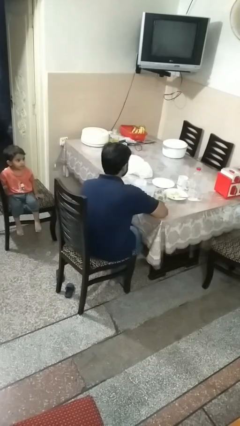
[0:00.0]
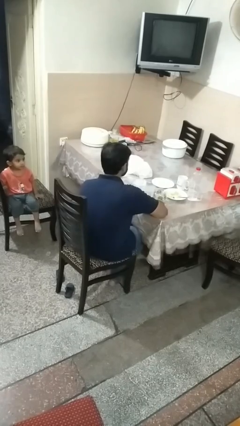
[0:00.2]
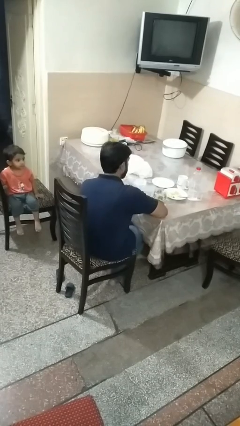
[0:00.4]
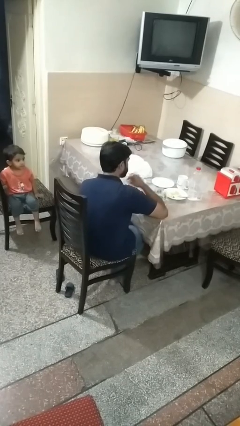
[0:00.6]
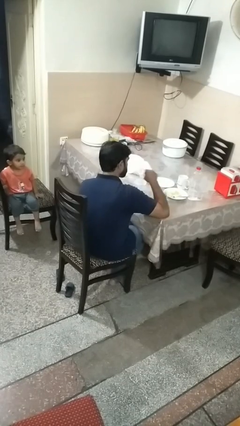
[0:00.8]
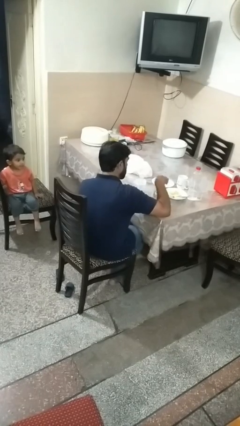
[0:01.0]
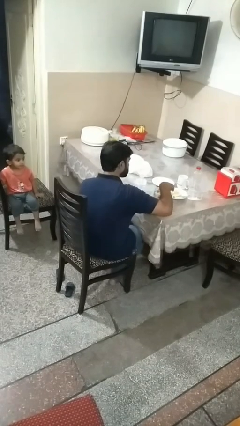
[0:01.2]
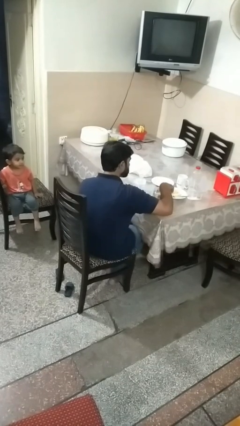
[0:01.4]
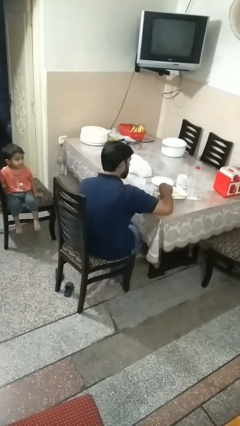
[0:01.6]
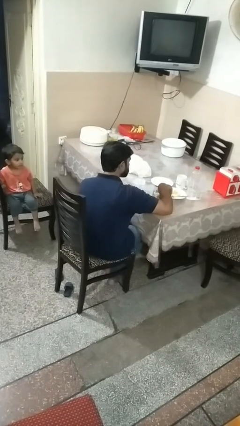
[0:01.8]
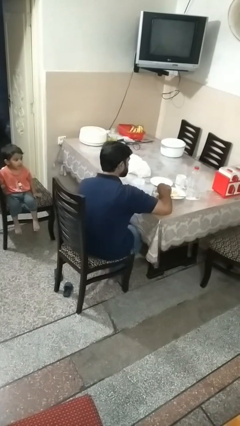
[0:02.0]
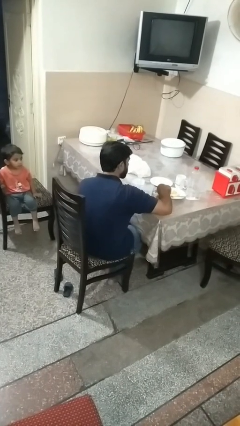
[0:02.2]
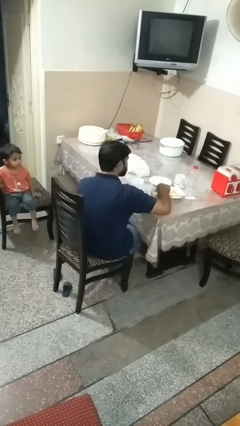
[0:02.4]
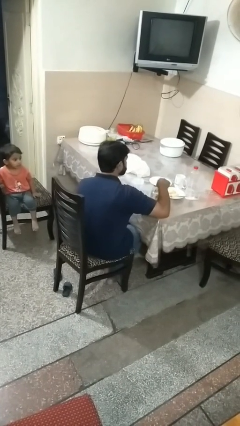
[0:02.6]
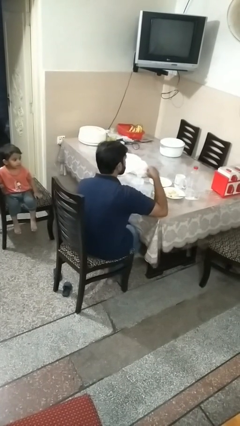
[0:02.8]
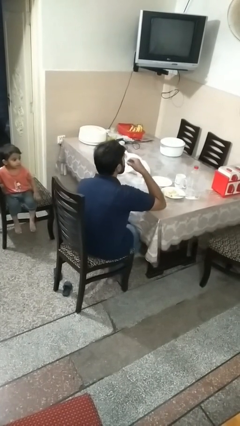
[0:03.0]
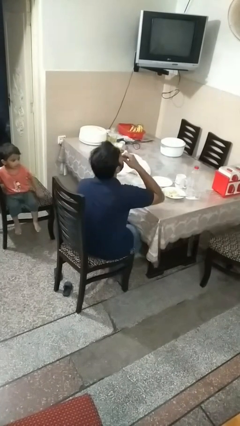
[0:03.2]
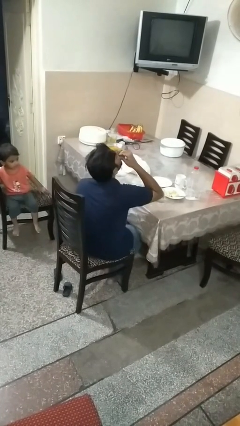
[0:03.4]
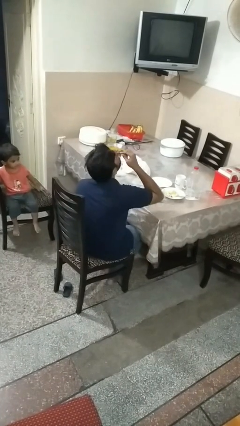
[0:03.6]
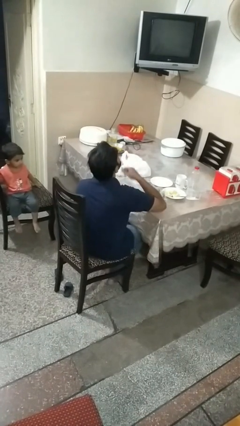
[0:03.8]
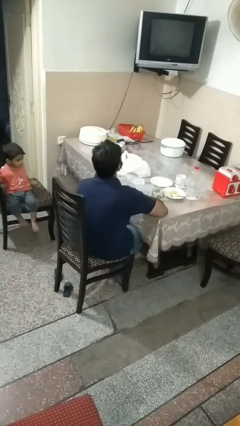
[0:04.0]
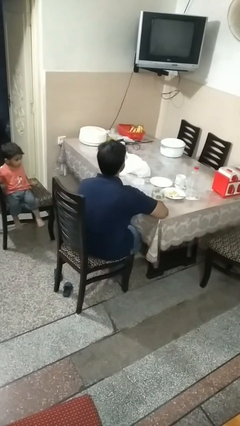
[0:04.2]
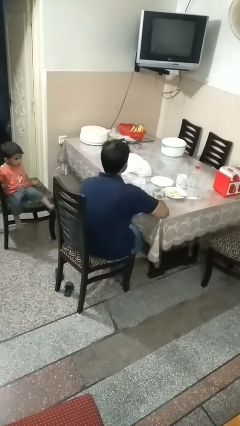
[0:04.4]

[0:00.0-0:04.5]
person eats with hands

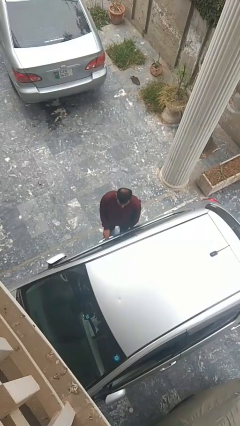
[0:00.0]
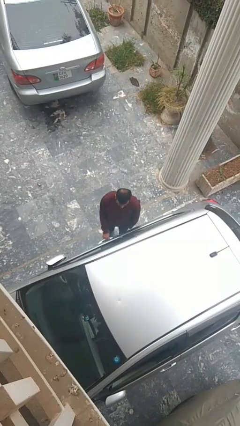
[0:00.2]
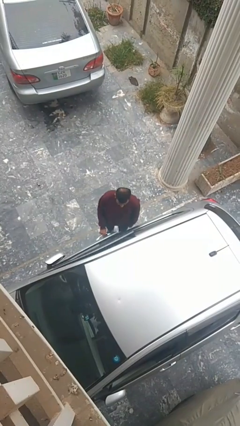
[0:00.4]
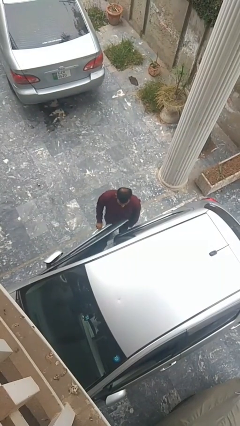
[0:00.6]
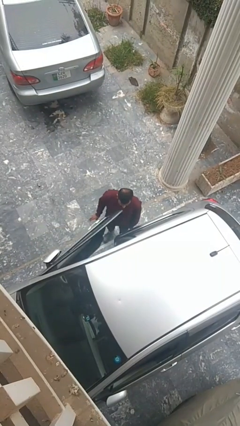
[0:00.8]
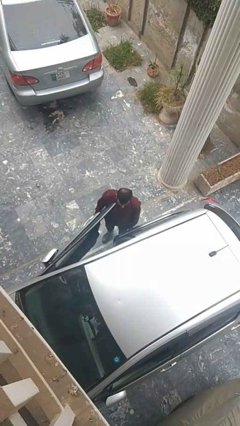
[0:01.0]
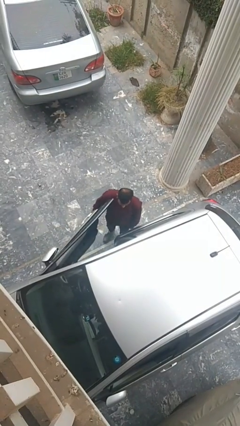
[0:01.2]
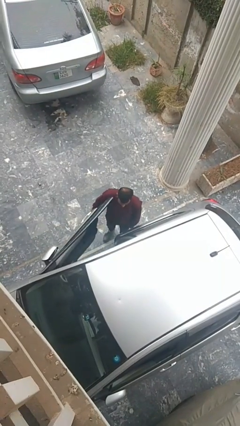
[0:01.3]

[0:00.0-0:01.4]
person opens car door

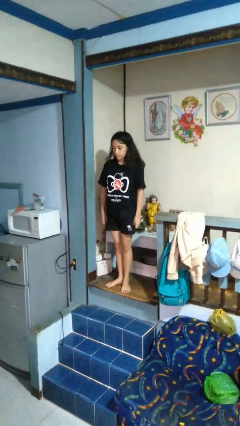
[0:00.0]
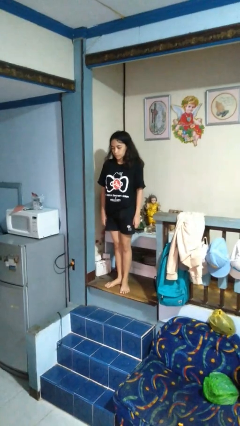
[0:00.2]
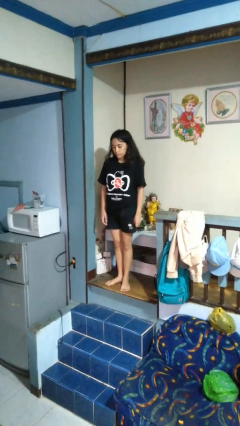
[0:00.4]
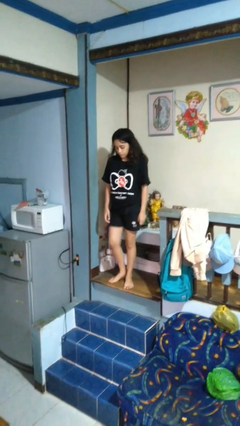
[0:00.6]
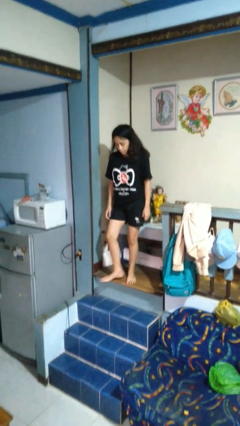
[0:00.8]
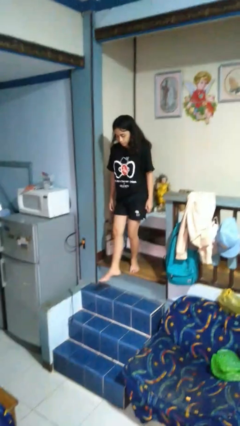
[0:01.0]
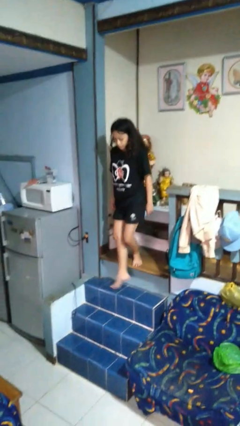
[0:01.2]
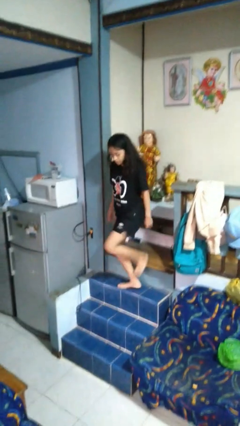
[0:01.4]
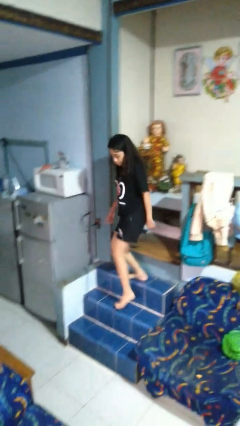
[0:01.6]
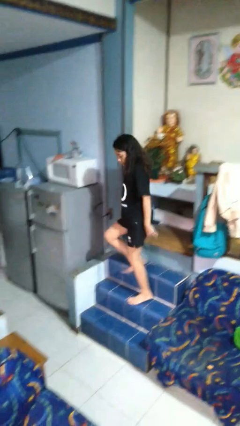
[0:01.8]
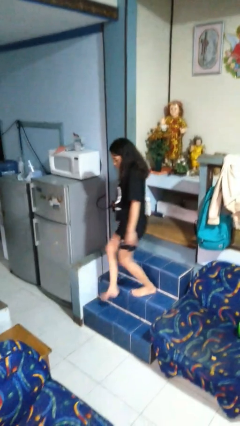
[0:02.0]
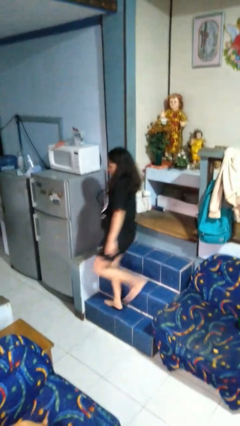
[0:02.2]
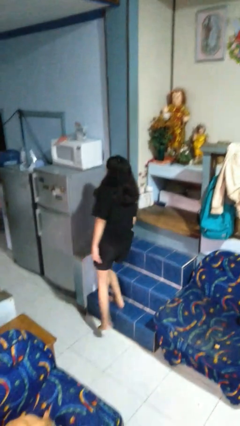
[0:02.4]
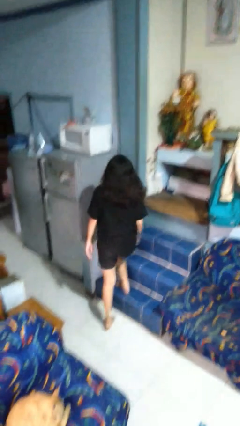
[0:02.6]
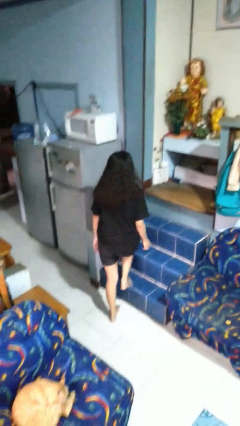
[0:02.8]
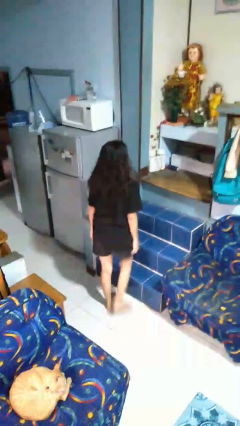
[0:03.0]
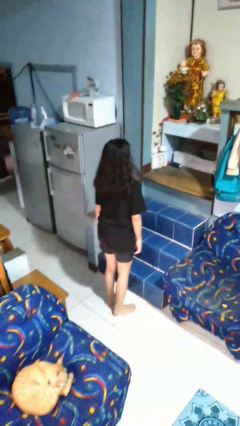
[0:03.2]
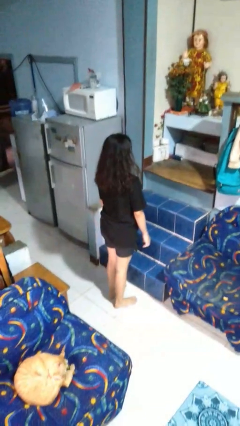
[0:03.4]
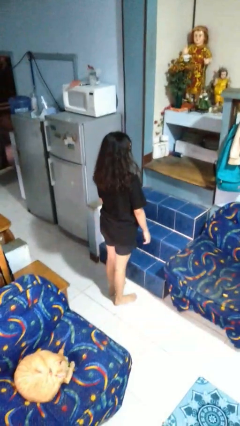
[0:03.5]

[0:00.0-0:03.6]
person climbs down stairs

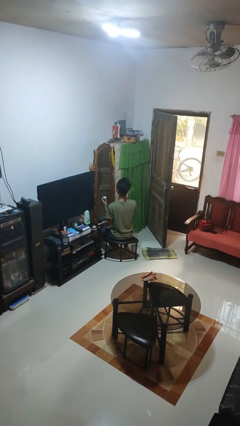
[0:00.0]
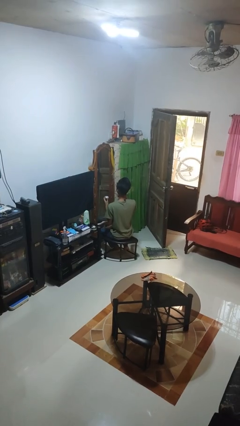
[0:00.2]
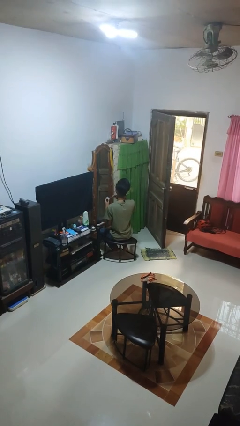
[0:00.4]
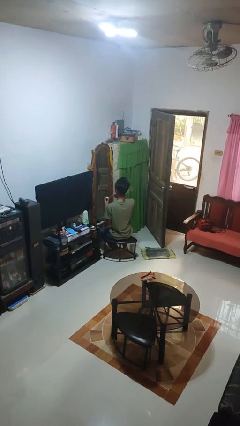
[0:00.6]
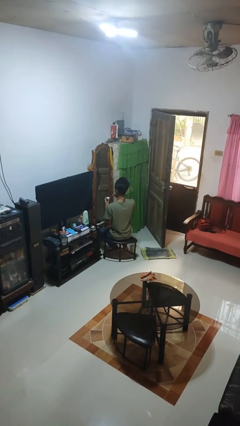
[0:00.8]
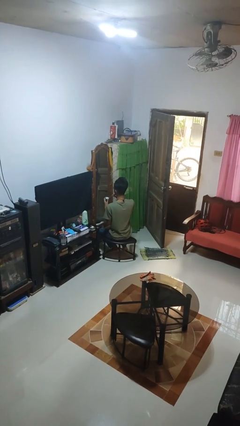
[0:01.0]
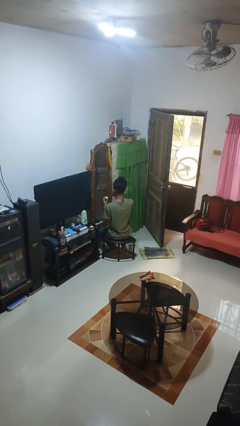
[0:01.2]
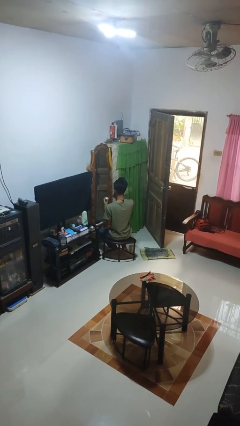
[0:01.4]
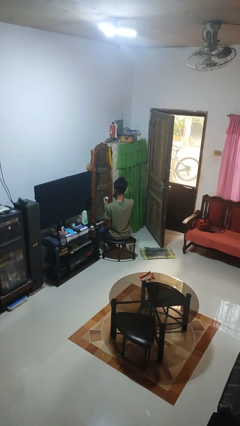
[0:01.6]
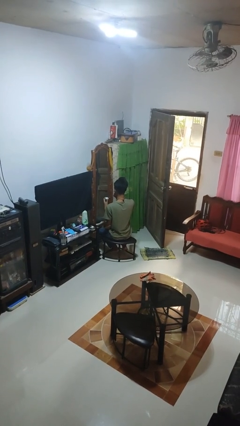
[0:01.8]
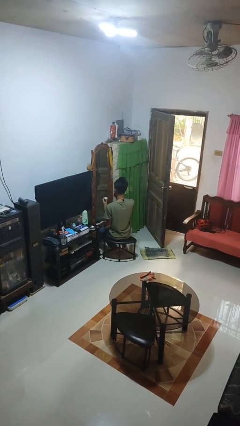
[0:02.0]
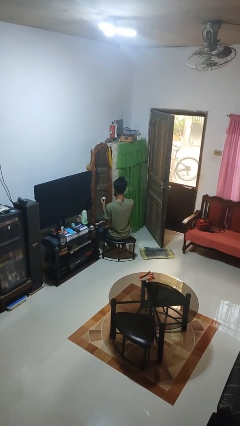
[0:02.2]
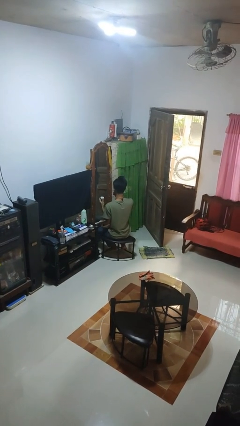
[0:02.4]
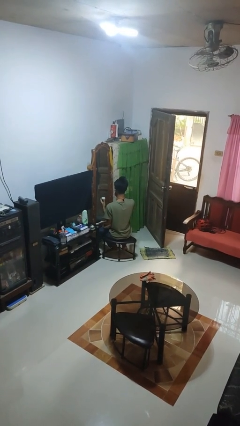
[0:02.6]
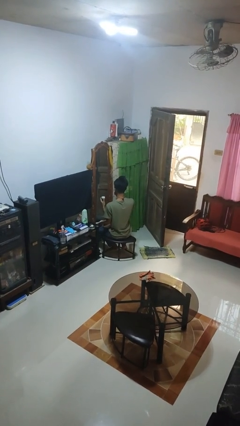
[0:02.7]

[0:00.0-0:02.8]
person applies eye makeup

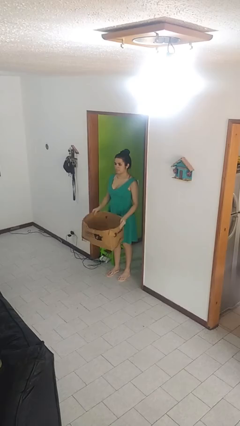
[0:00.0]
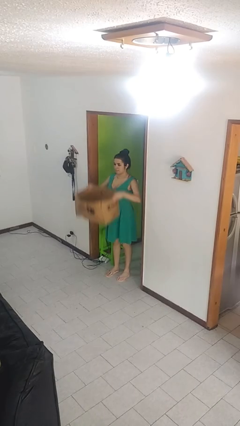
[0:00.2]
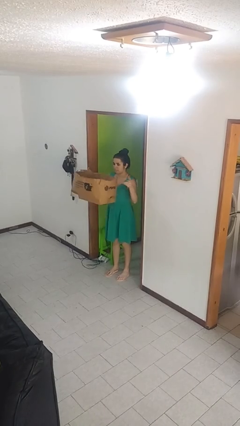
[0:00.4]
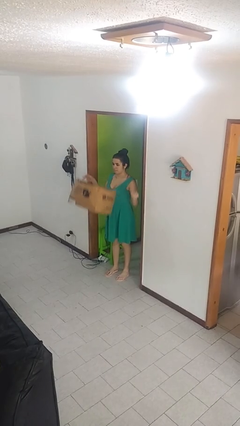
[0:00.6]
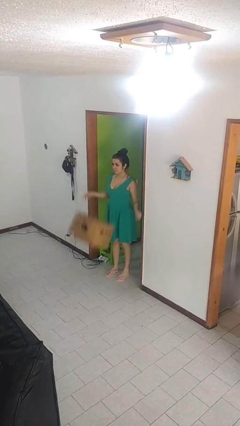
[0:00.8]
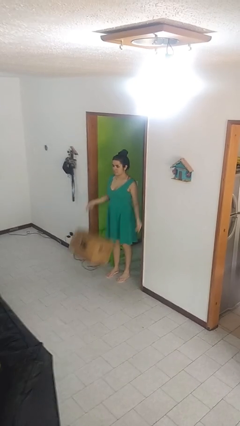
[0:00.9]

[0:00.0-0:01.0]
person throws object into air

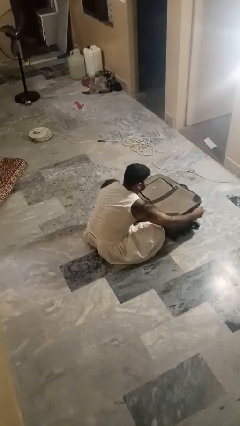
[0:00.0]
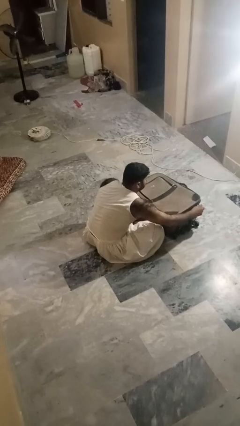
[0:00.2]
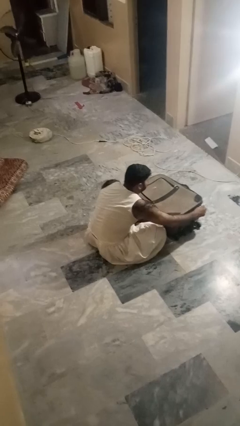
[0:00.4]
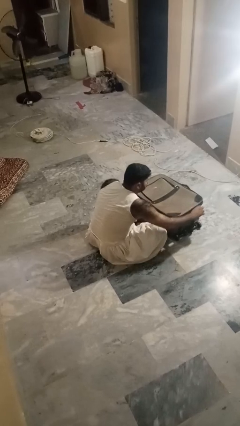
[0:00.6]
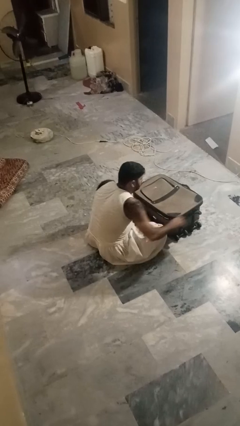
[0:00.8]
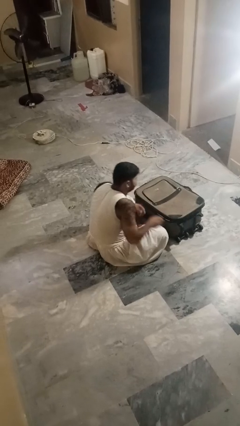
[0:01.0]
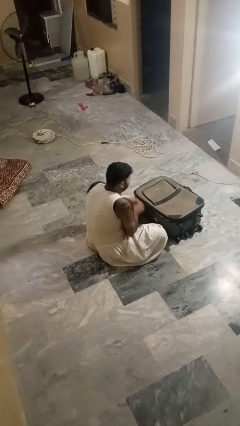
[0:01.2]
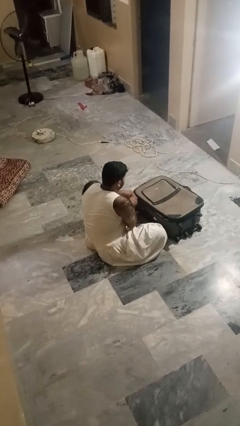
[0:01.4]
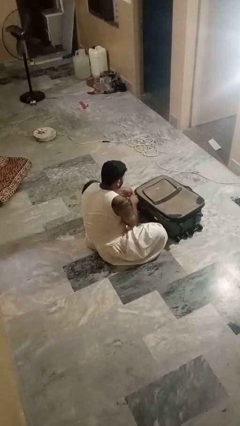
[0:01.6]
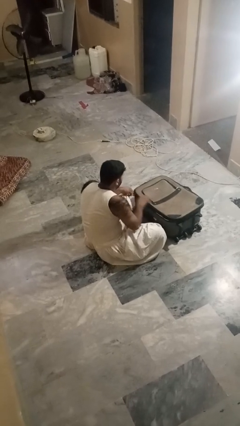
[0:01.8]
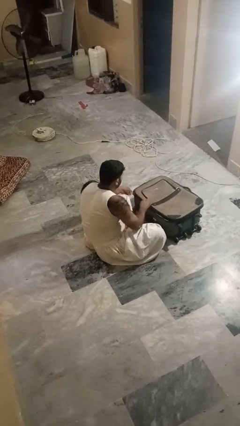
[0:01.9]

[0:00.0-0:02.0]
person opens suitcase

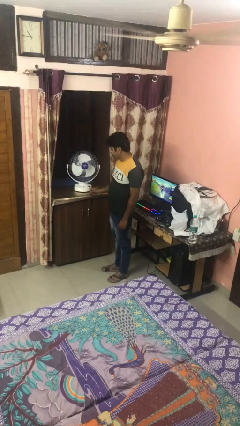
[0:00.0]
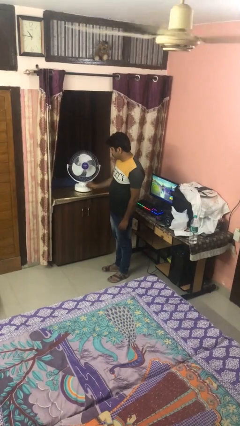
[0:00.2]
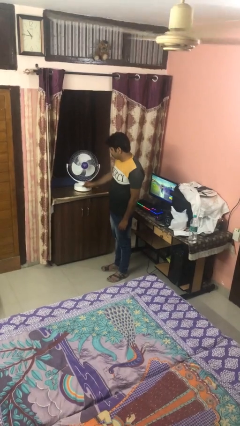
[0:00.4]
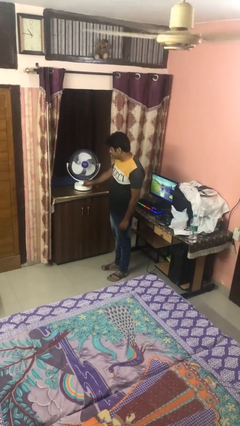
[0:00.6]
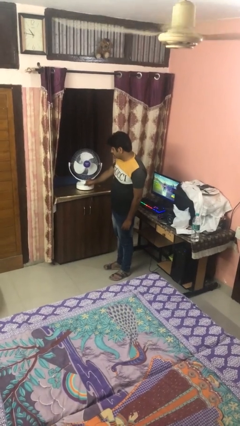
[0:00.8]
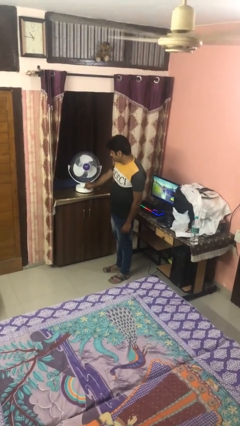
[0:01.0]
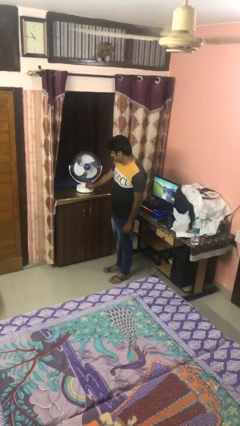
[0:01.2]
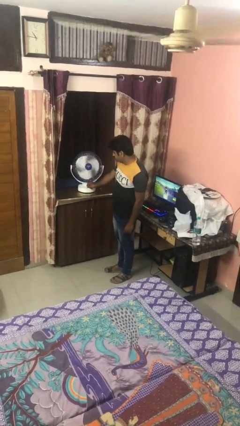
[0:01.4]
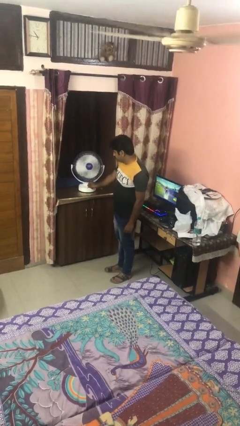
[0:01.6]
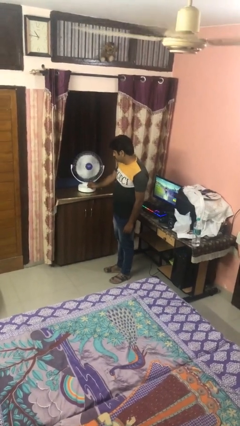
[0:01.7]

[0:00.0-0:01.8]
person turns on fan
